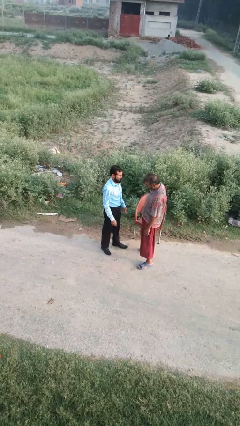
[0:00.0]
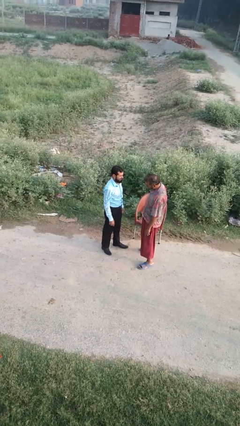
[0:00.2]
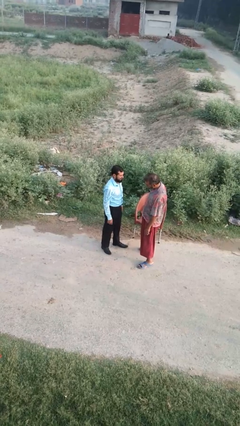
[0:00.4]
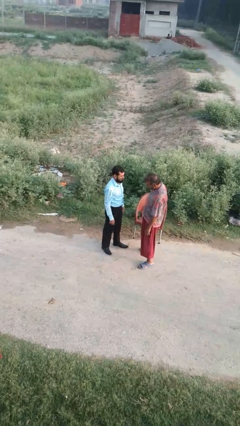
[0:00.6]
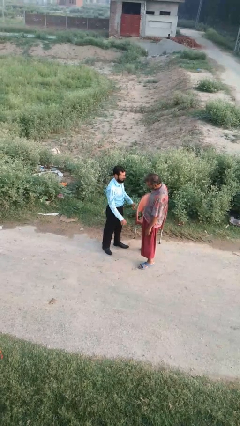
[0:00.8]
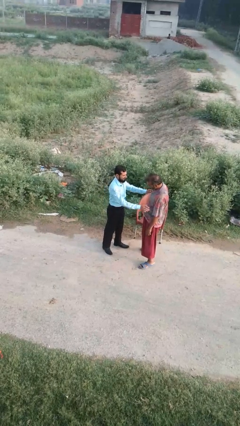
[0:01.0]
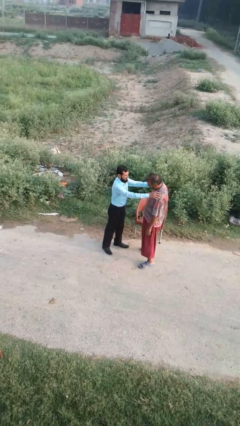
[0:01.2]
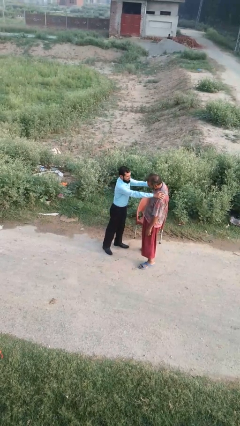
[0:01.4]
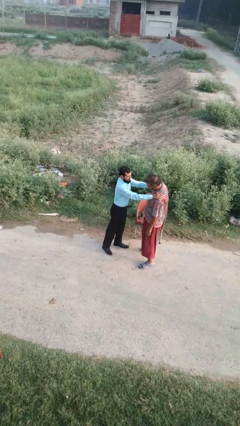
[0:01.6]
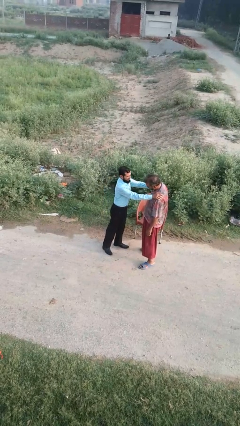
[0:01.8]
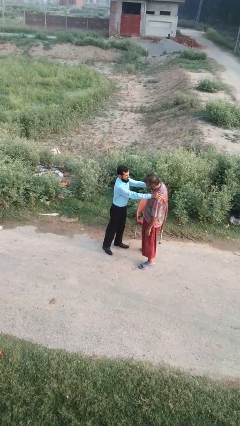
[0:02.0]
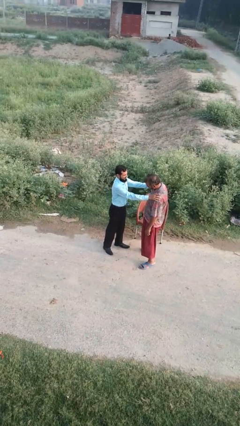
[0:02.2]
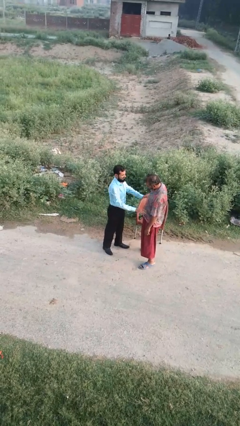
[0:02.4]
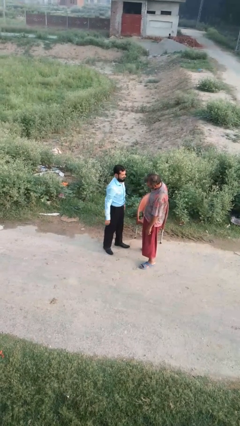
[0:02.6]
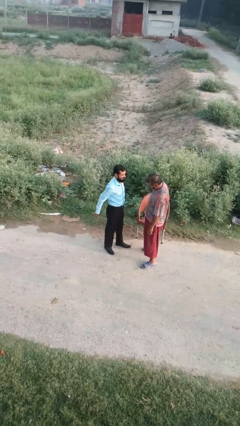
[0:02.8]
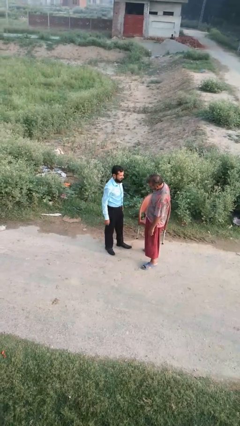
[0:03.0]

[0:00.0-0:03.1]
person pounds shoulders of person

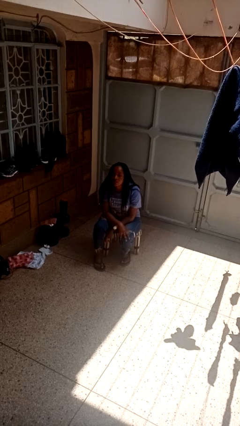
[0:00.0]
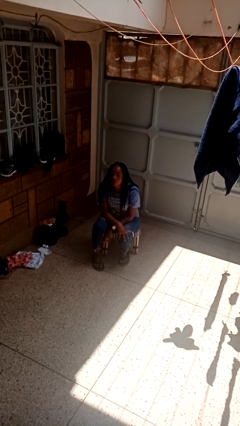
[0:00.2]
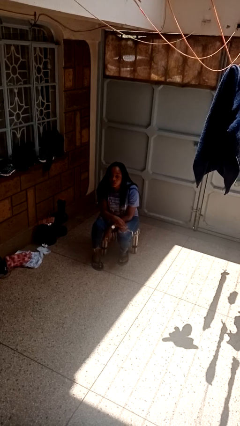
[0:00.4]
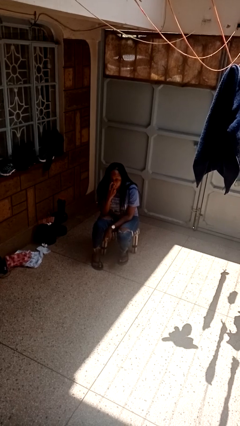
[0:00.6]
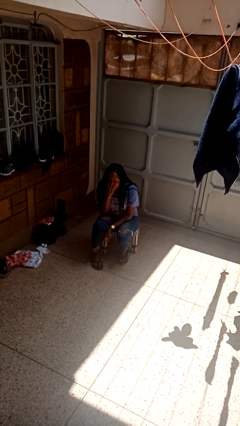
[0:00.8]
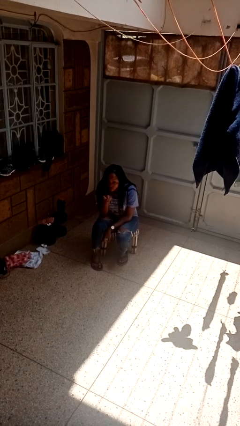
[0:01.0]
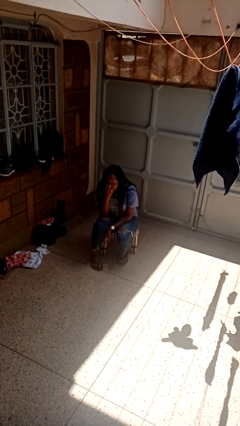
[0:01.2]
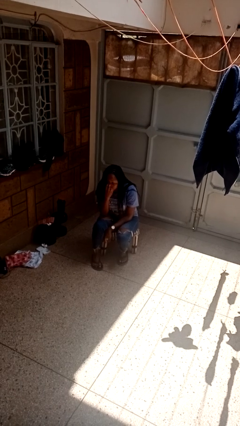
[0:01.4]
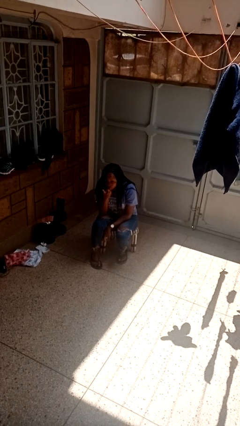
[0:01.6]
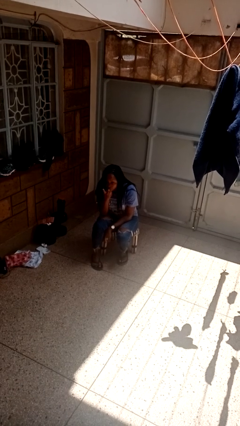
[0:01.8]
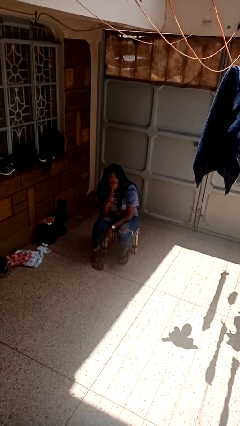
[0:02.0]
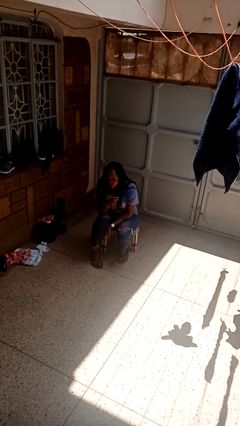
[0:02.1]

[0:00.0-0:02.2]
person gestures watch closely

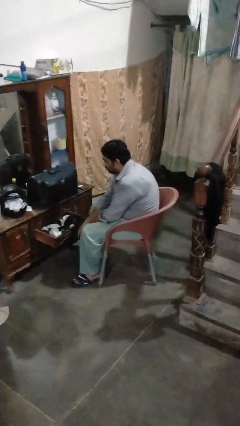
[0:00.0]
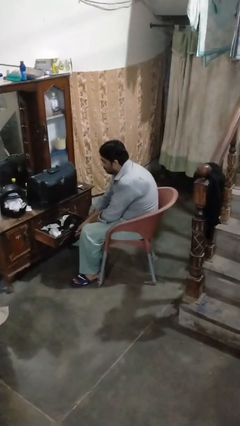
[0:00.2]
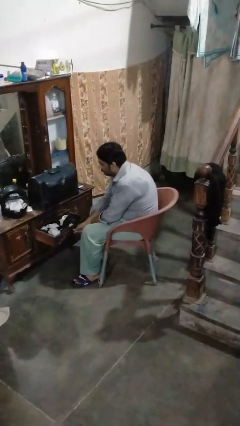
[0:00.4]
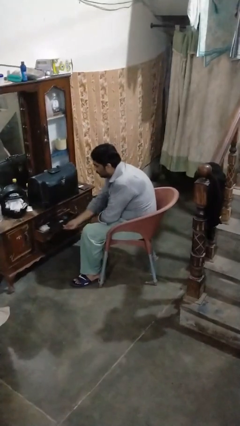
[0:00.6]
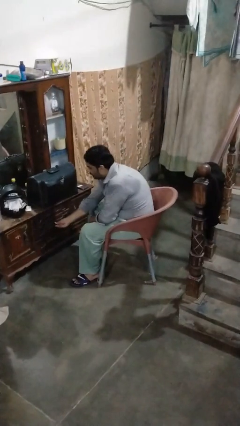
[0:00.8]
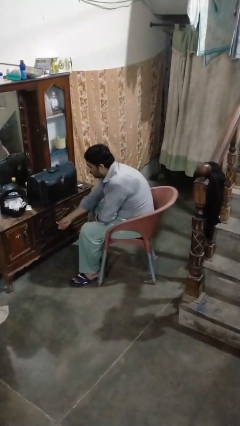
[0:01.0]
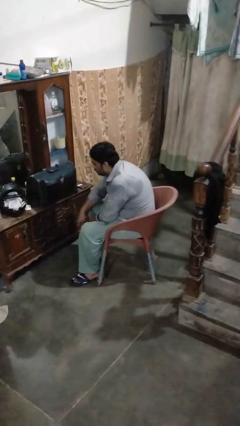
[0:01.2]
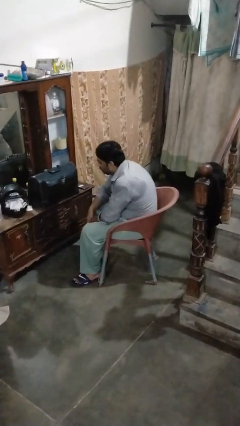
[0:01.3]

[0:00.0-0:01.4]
person closes dresser drawer

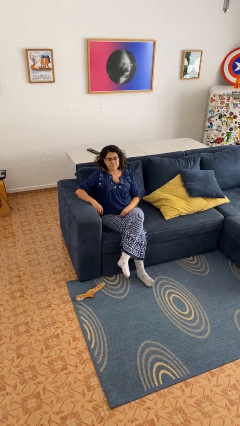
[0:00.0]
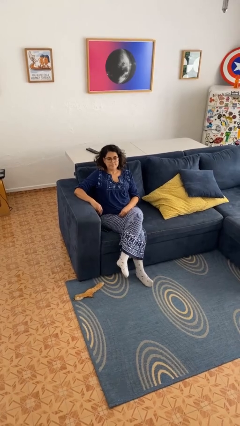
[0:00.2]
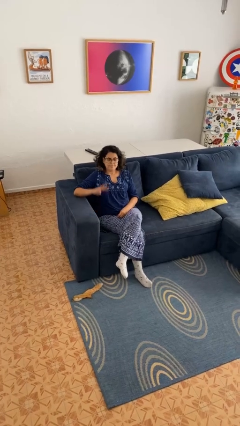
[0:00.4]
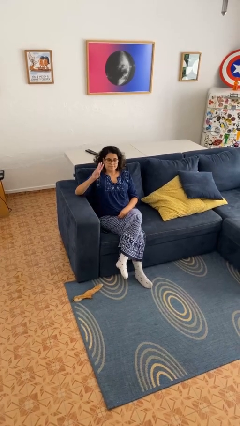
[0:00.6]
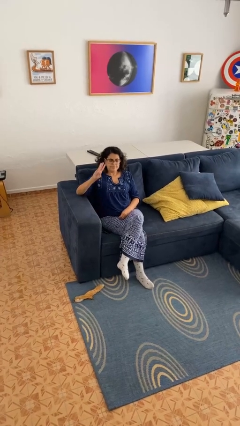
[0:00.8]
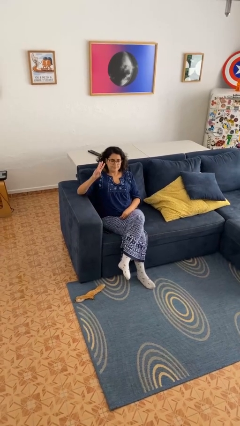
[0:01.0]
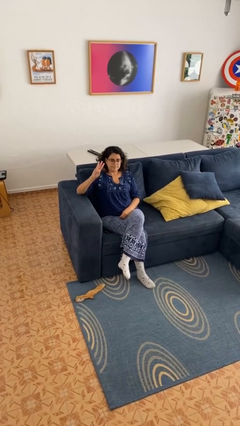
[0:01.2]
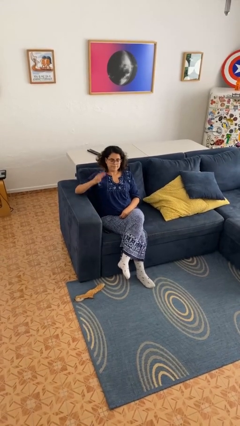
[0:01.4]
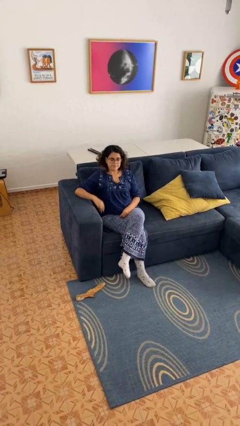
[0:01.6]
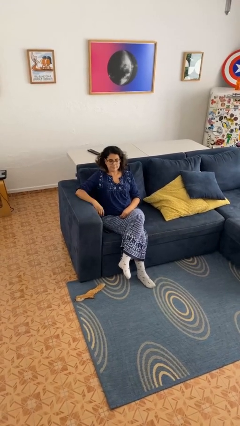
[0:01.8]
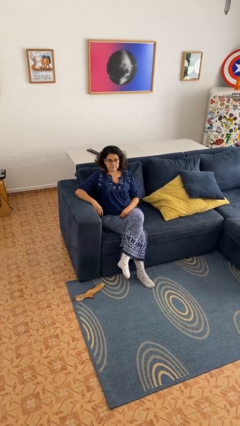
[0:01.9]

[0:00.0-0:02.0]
person gestures number three

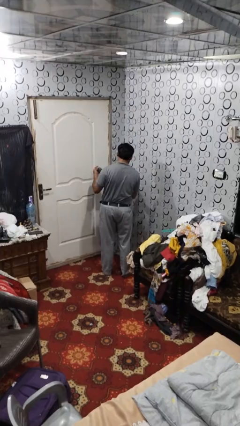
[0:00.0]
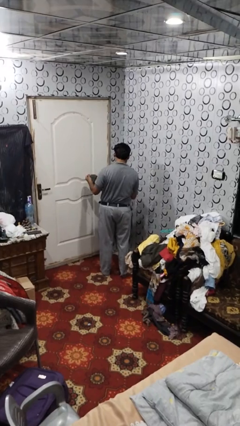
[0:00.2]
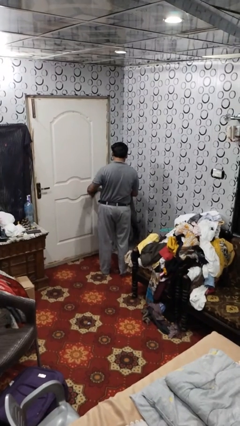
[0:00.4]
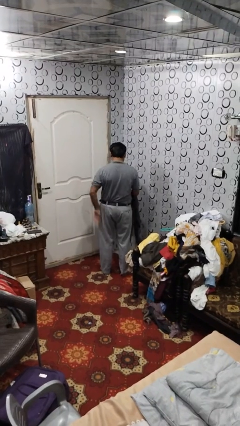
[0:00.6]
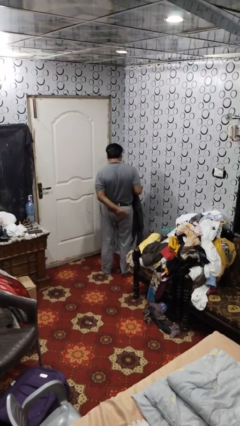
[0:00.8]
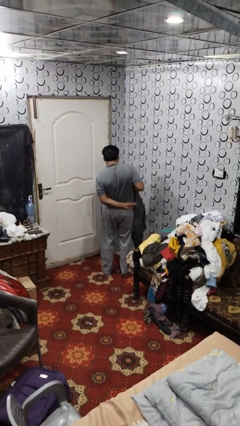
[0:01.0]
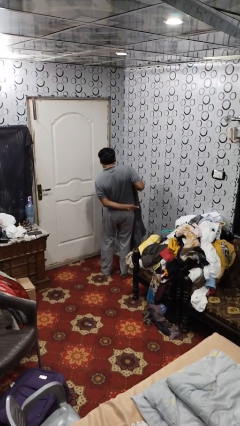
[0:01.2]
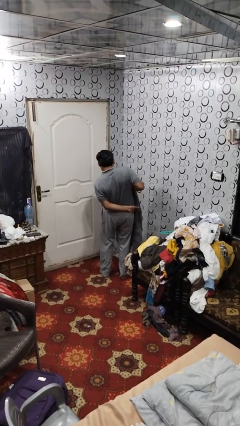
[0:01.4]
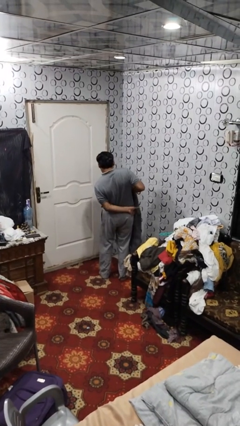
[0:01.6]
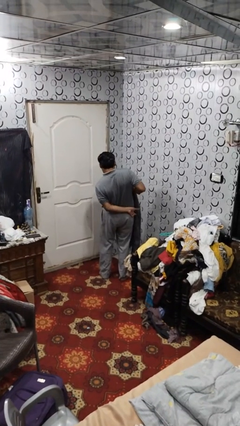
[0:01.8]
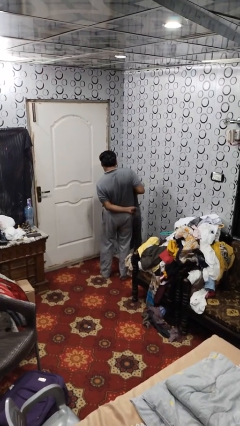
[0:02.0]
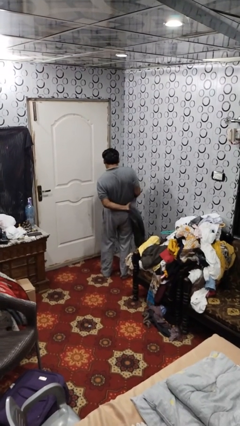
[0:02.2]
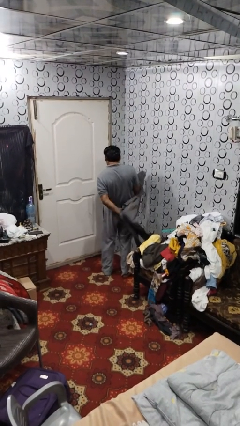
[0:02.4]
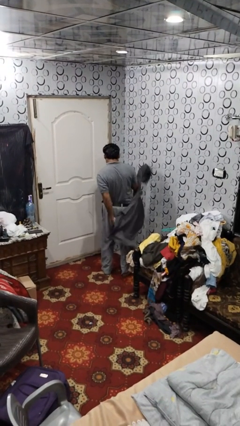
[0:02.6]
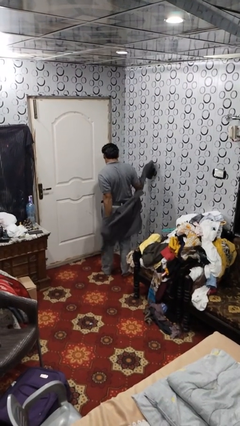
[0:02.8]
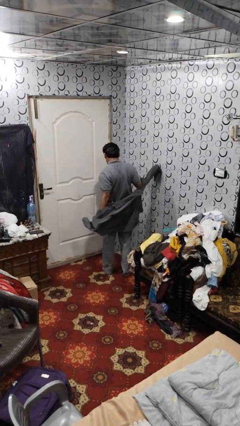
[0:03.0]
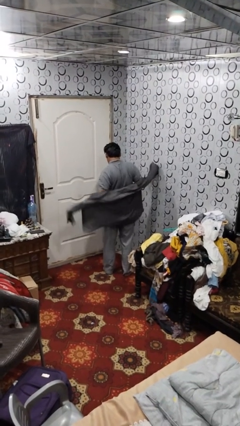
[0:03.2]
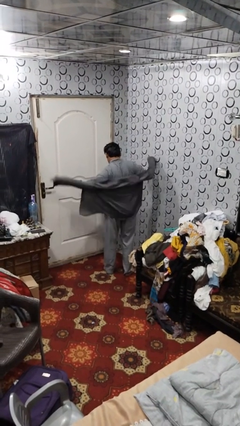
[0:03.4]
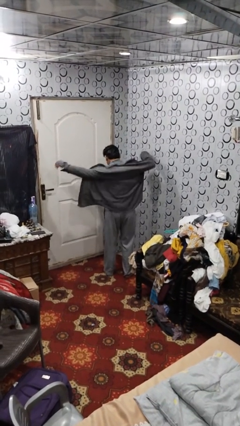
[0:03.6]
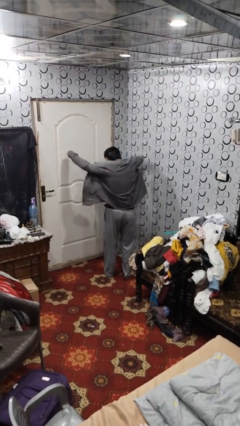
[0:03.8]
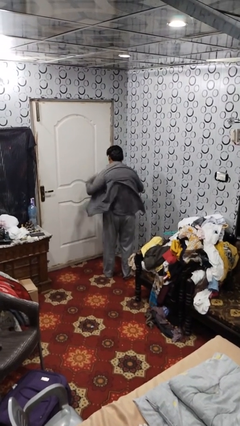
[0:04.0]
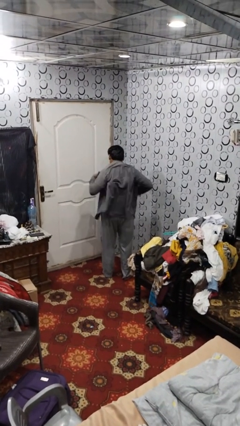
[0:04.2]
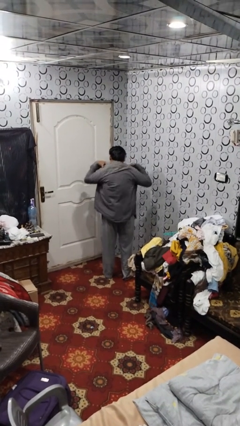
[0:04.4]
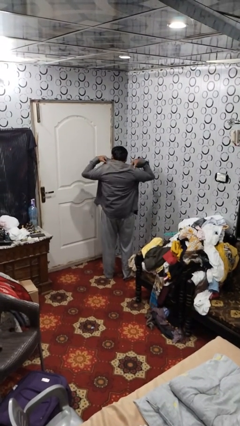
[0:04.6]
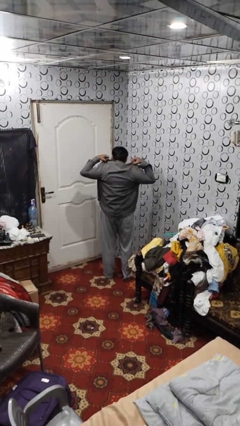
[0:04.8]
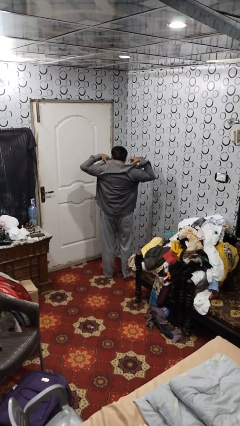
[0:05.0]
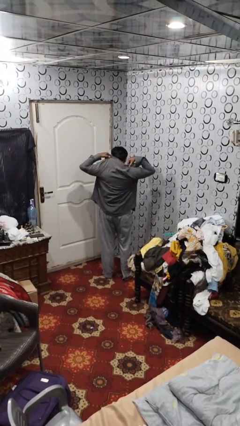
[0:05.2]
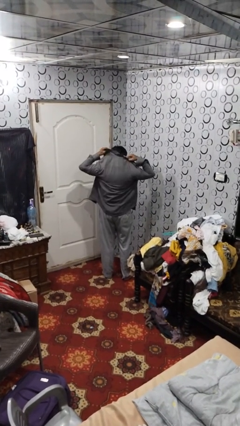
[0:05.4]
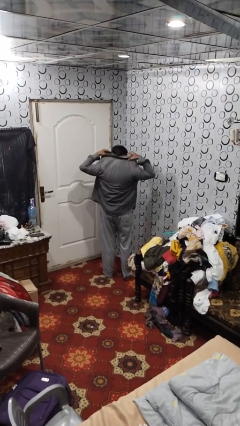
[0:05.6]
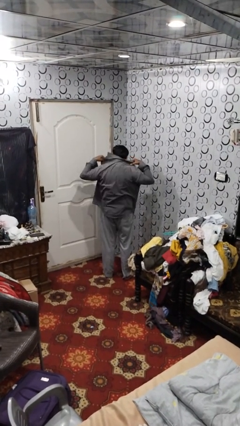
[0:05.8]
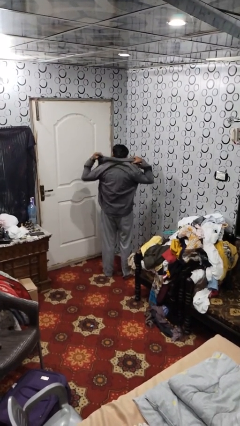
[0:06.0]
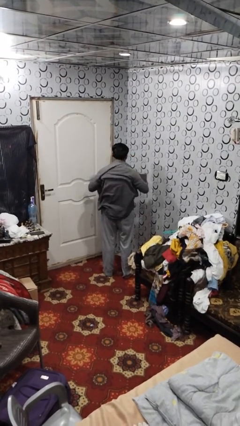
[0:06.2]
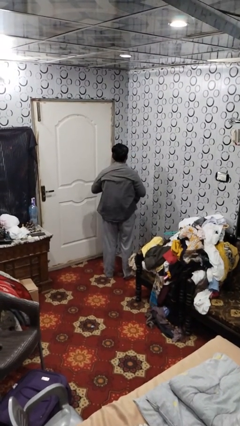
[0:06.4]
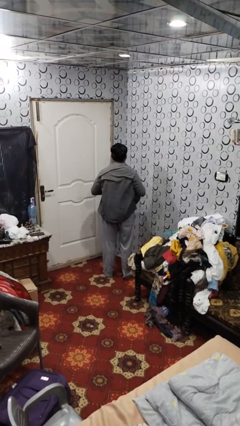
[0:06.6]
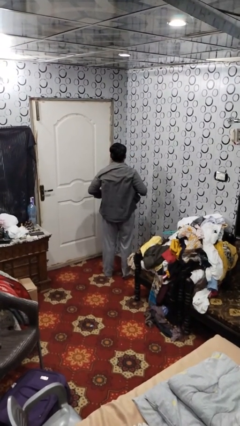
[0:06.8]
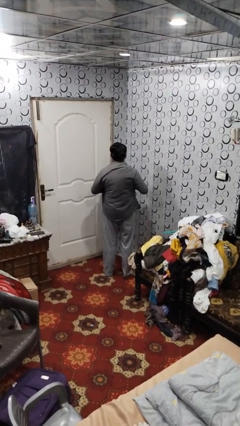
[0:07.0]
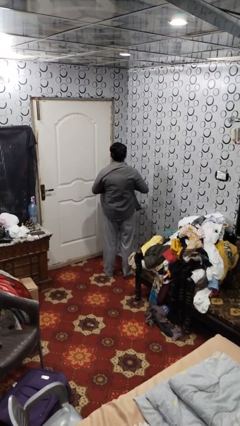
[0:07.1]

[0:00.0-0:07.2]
person puts on shirt

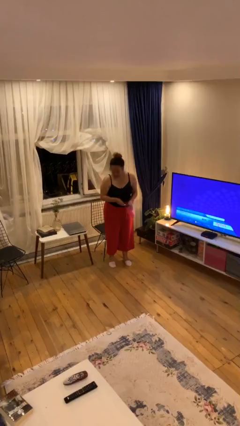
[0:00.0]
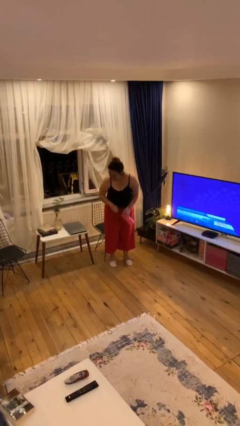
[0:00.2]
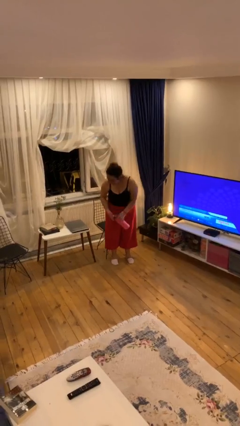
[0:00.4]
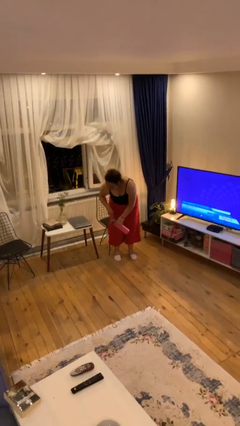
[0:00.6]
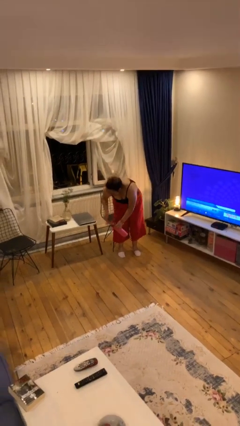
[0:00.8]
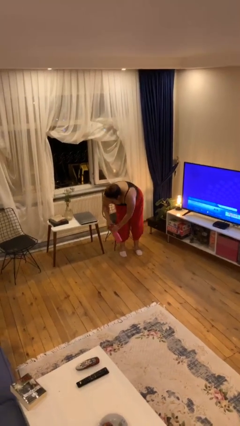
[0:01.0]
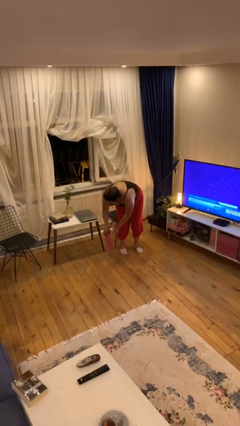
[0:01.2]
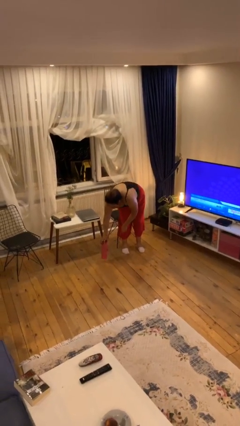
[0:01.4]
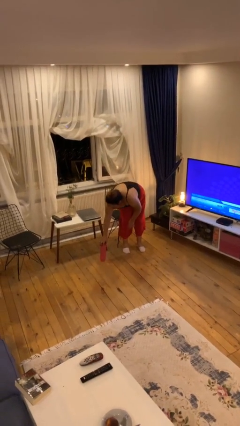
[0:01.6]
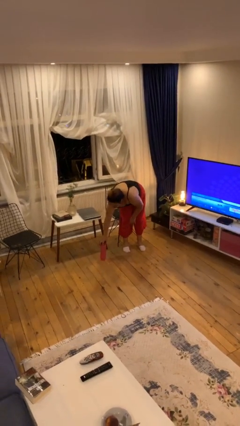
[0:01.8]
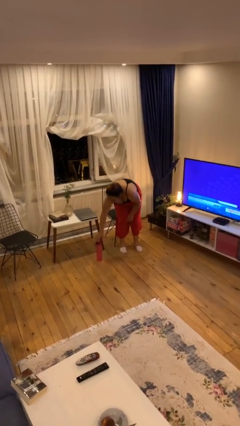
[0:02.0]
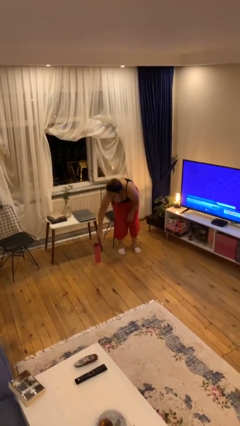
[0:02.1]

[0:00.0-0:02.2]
person puts down object on floor
